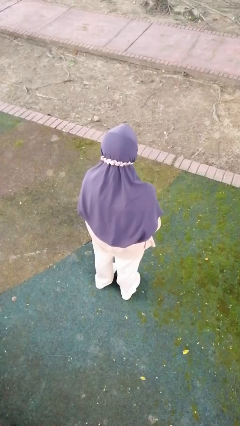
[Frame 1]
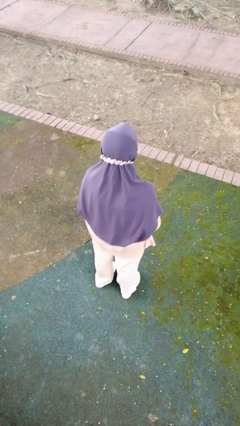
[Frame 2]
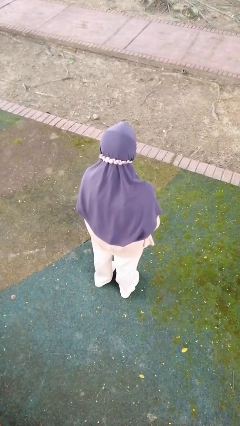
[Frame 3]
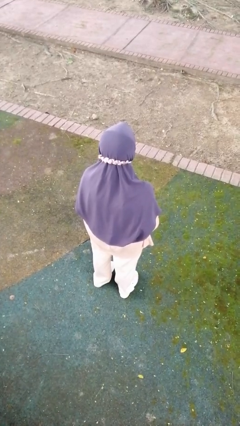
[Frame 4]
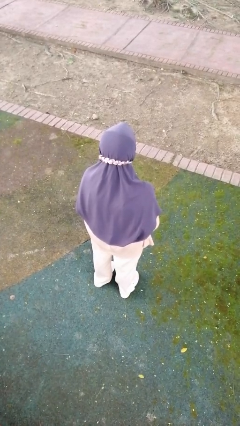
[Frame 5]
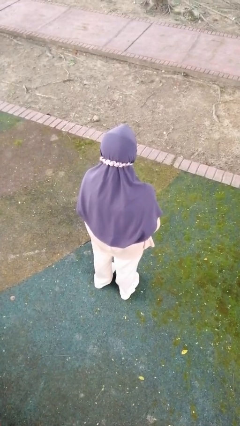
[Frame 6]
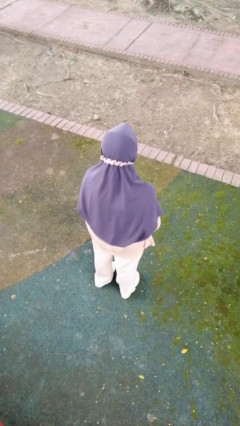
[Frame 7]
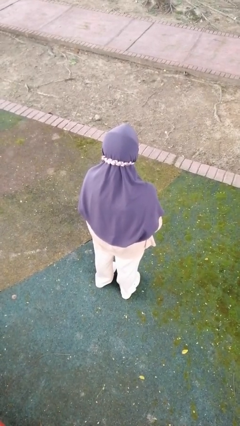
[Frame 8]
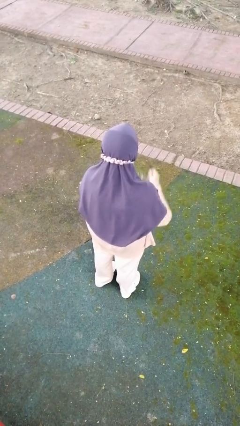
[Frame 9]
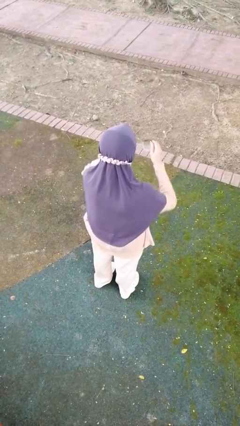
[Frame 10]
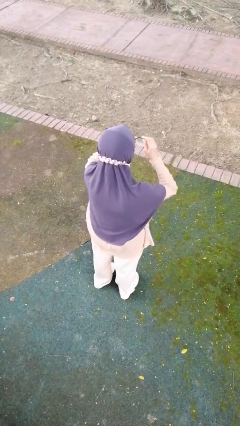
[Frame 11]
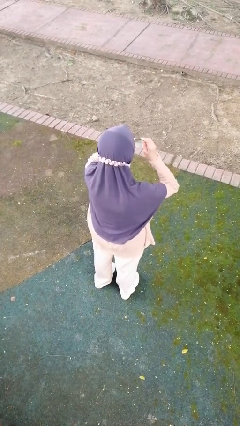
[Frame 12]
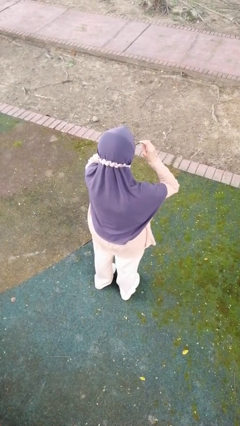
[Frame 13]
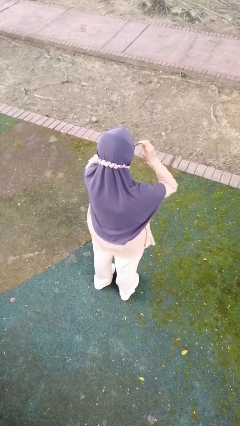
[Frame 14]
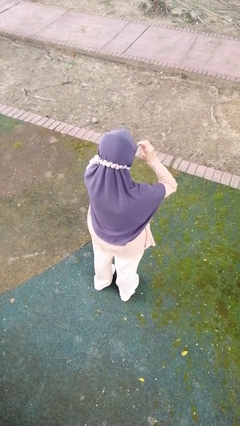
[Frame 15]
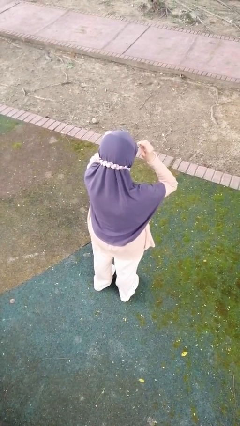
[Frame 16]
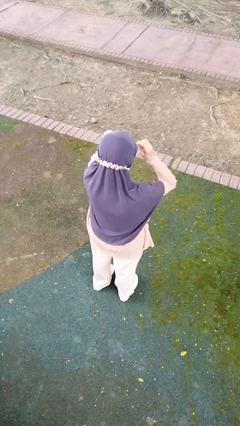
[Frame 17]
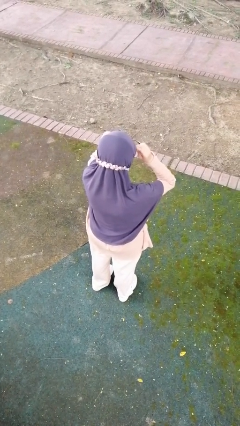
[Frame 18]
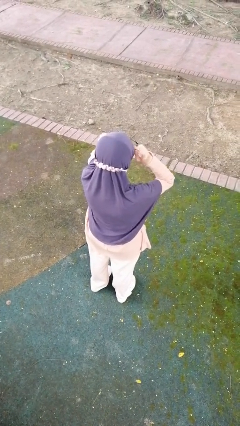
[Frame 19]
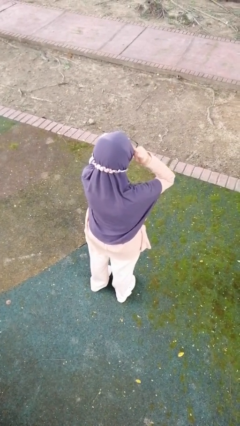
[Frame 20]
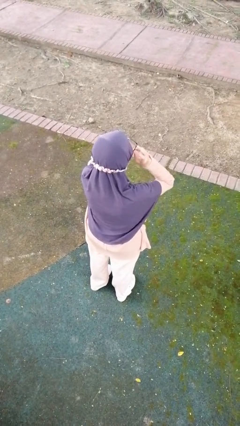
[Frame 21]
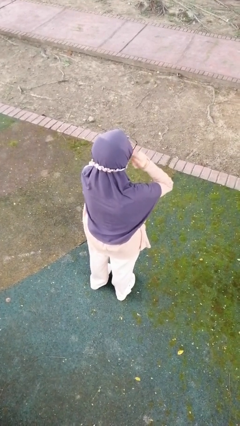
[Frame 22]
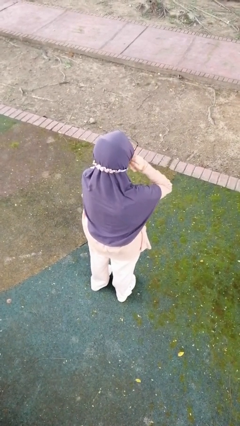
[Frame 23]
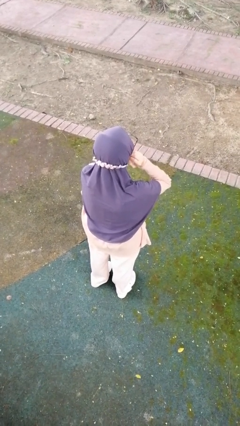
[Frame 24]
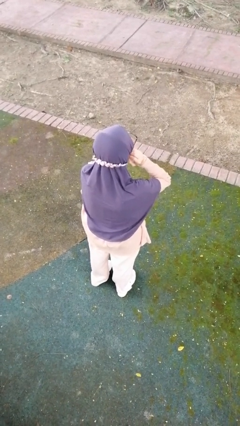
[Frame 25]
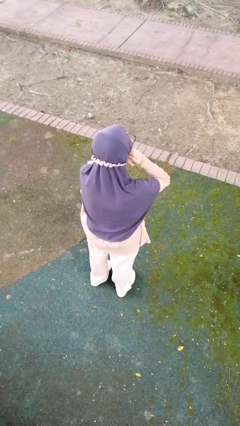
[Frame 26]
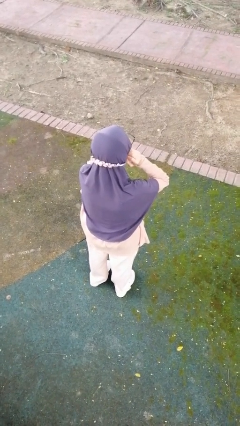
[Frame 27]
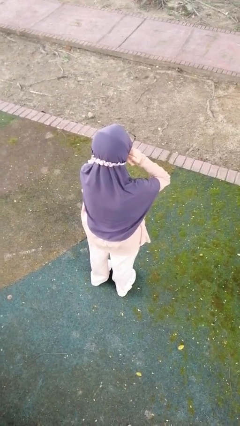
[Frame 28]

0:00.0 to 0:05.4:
person puts on glasses

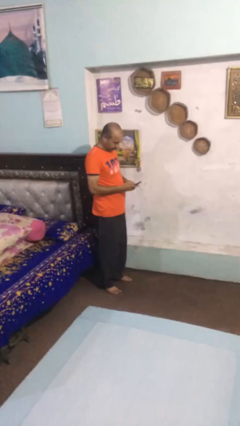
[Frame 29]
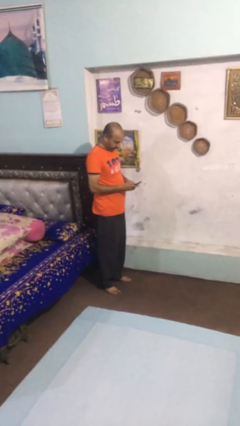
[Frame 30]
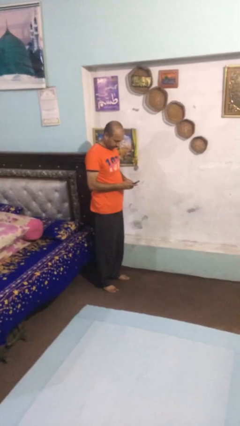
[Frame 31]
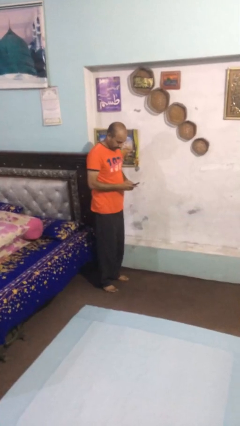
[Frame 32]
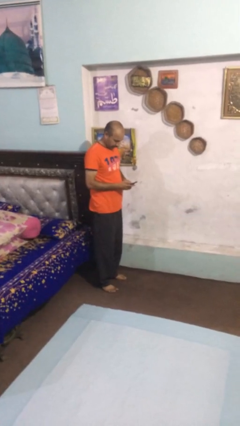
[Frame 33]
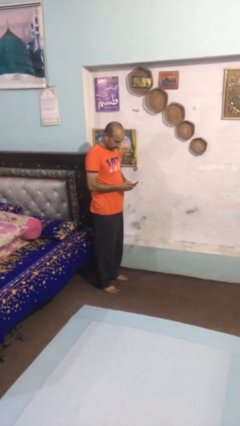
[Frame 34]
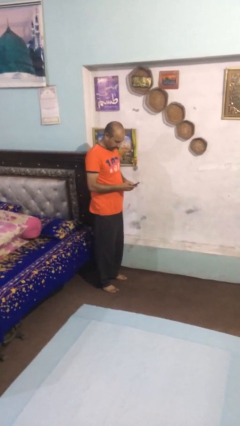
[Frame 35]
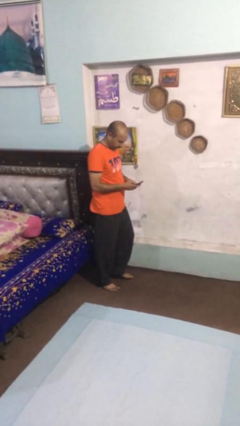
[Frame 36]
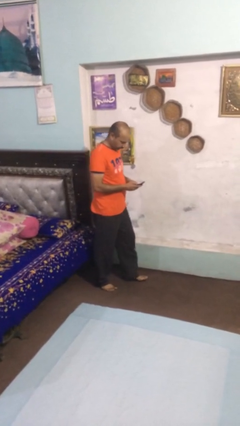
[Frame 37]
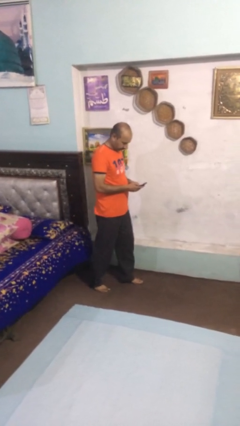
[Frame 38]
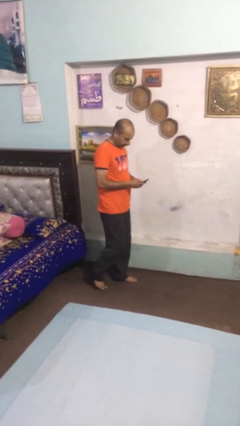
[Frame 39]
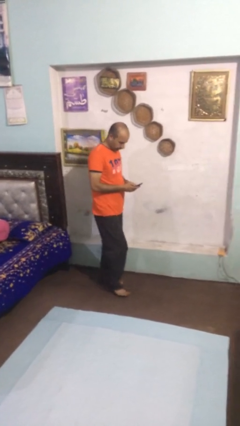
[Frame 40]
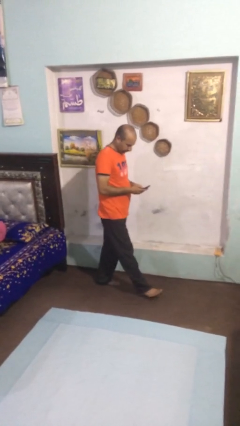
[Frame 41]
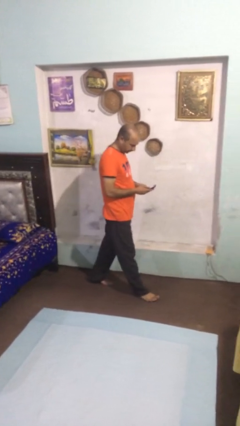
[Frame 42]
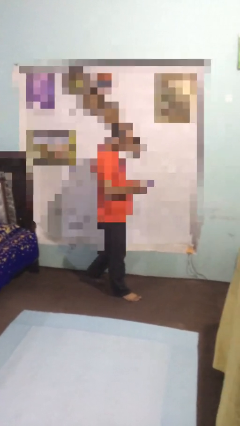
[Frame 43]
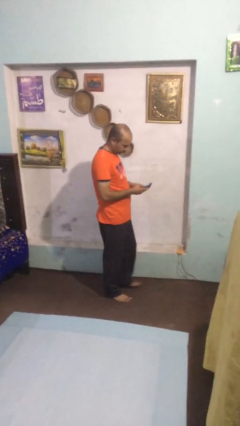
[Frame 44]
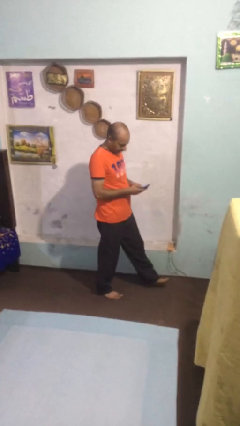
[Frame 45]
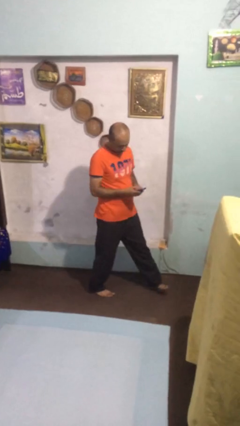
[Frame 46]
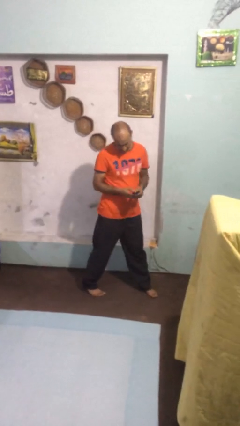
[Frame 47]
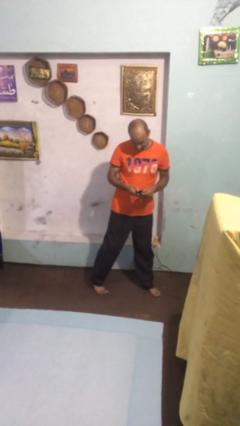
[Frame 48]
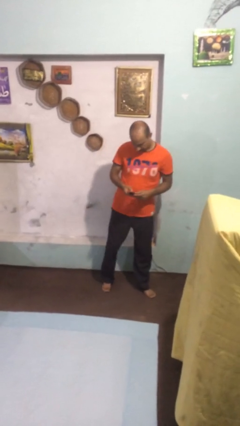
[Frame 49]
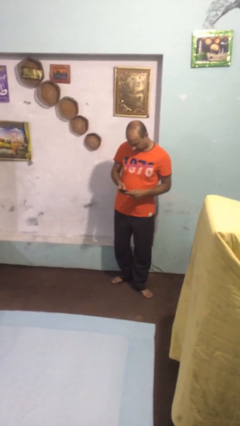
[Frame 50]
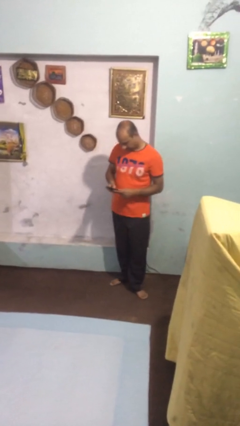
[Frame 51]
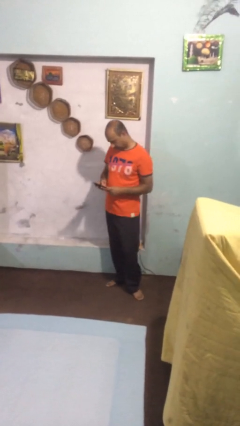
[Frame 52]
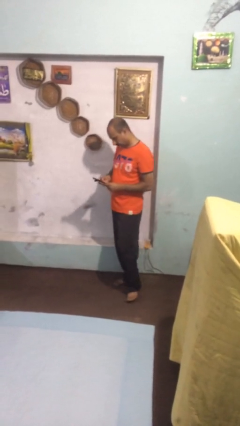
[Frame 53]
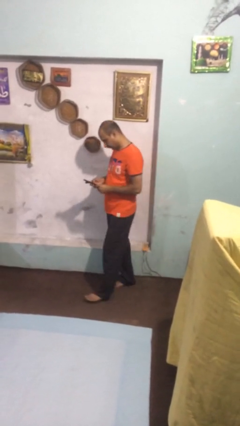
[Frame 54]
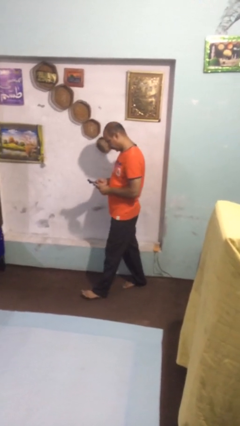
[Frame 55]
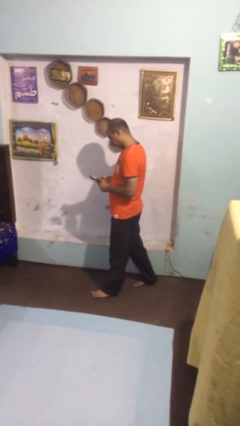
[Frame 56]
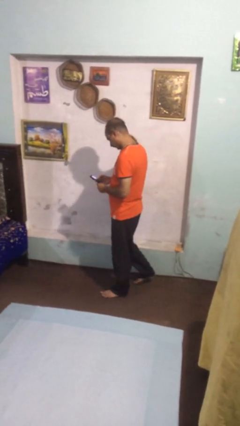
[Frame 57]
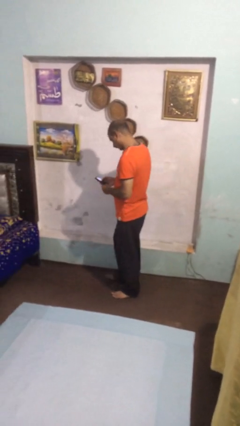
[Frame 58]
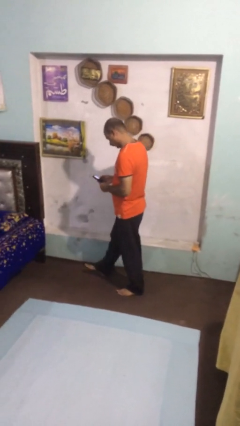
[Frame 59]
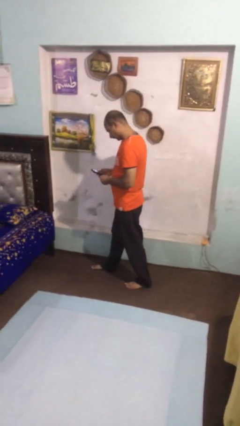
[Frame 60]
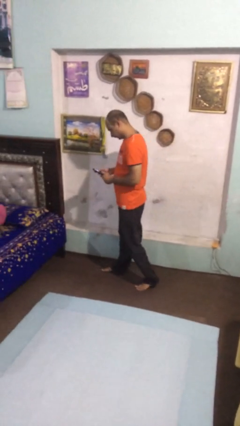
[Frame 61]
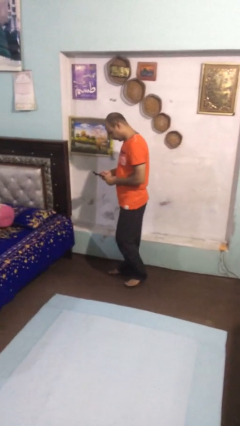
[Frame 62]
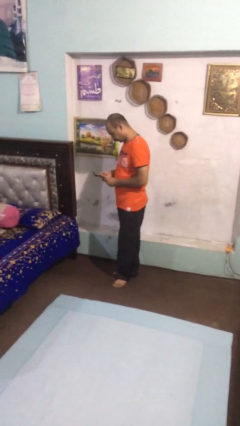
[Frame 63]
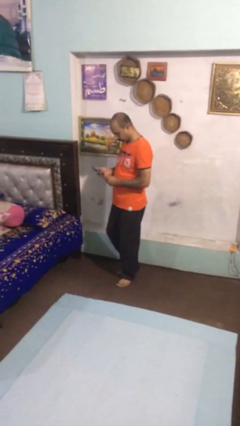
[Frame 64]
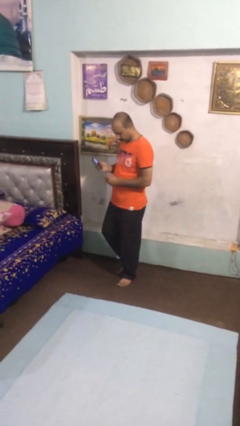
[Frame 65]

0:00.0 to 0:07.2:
person texts on phone

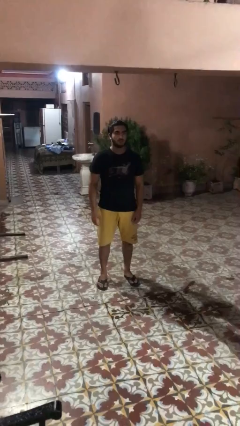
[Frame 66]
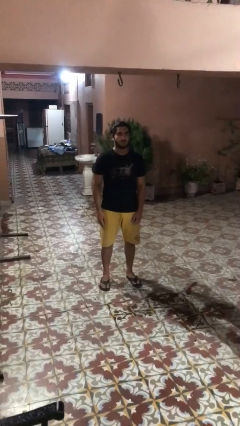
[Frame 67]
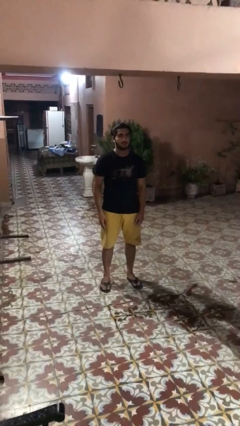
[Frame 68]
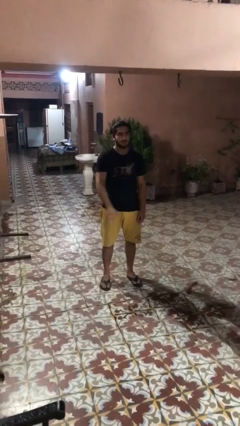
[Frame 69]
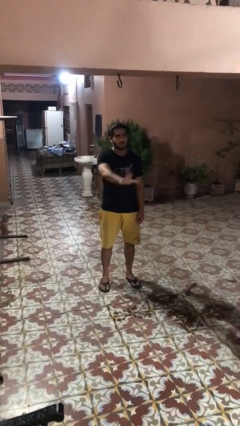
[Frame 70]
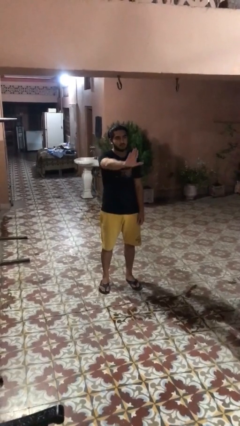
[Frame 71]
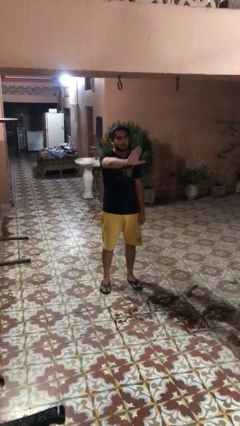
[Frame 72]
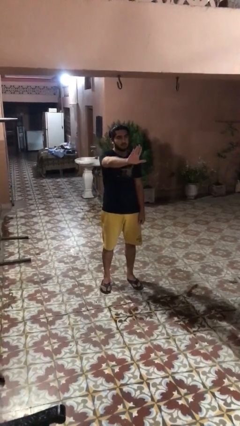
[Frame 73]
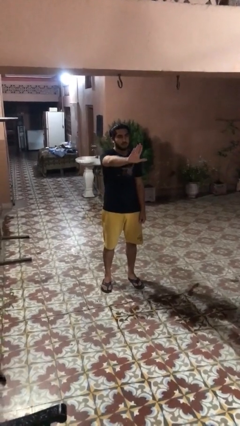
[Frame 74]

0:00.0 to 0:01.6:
person gestures stop

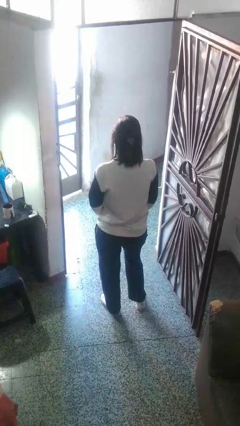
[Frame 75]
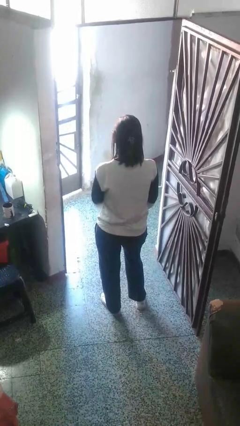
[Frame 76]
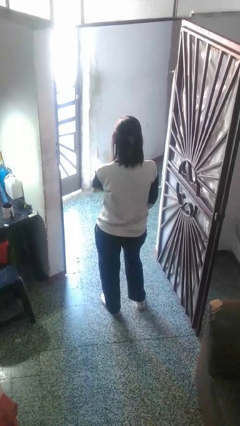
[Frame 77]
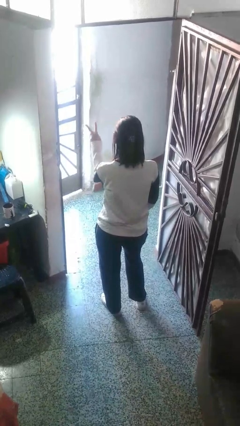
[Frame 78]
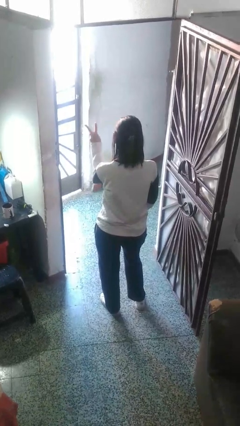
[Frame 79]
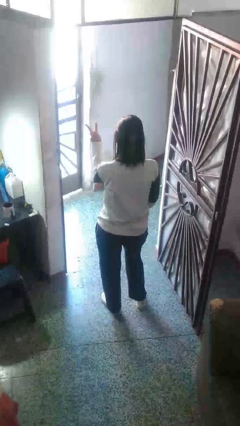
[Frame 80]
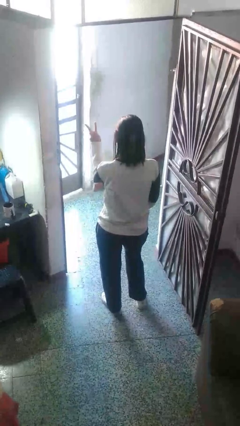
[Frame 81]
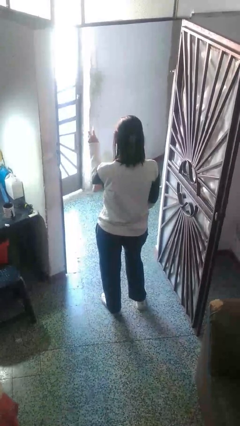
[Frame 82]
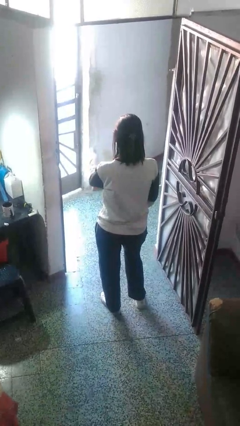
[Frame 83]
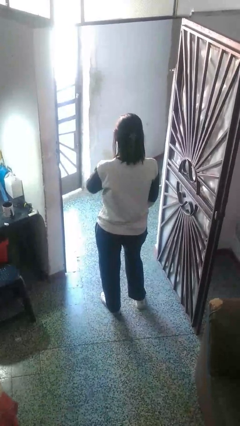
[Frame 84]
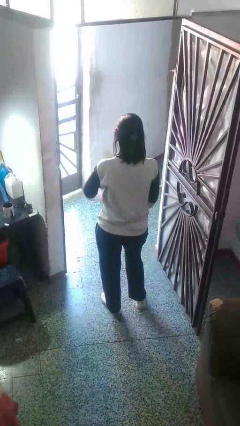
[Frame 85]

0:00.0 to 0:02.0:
person gestures peace

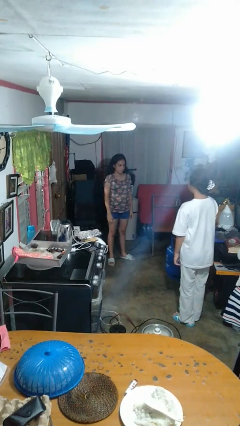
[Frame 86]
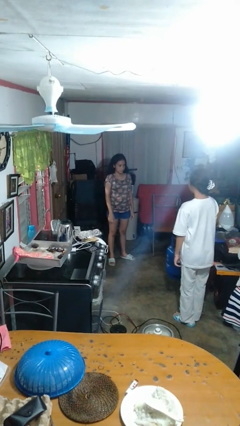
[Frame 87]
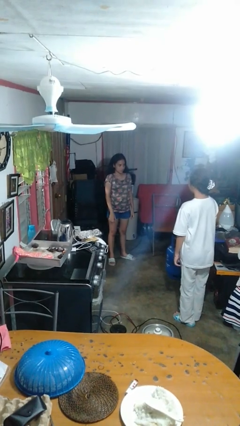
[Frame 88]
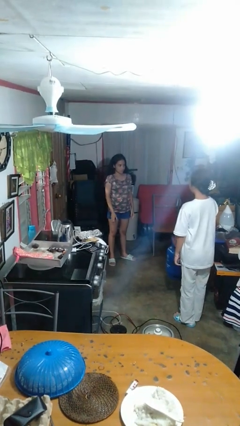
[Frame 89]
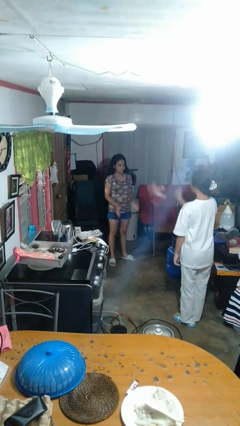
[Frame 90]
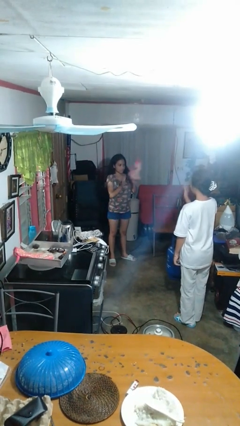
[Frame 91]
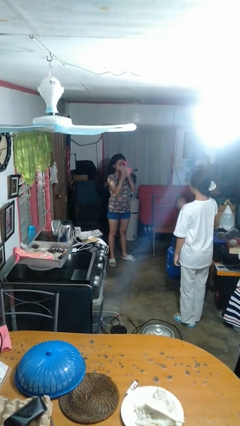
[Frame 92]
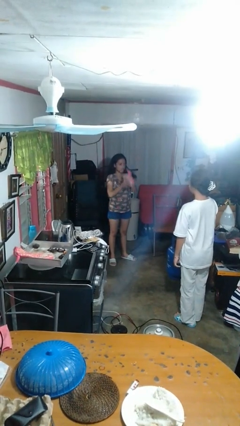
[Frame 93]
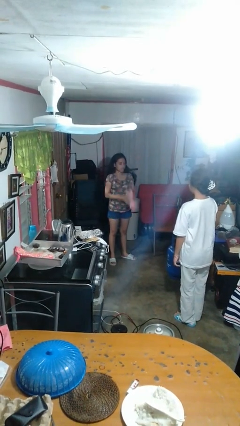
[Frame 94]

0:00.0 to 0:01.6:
person catches object from person
